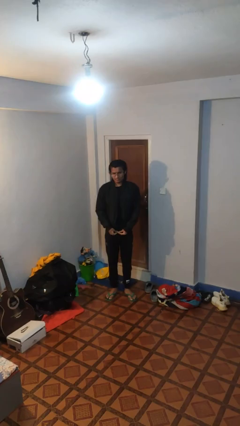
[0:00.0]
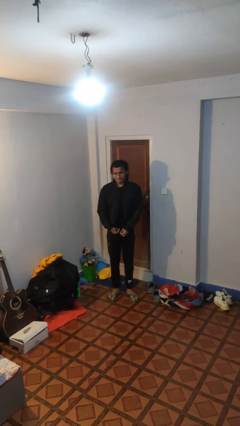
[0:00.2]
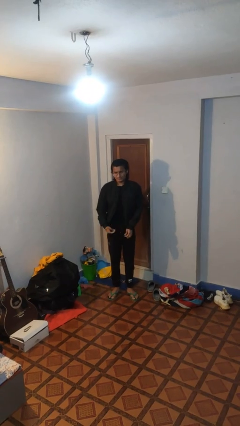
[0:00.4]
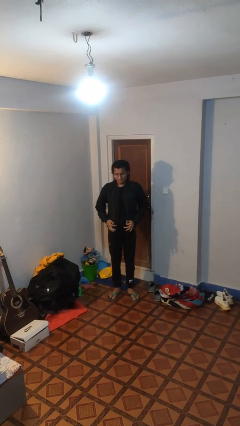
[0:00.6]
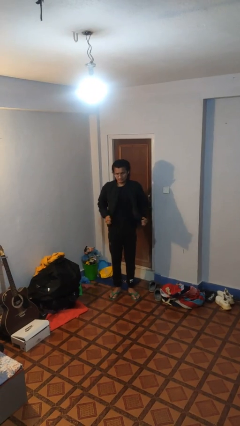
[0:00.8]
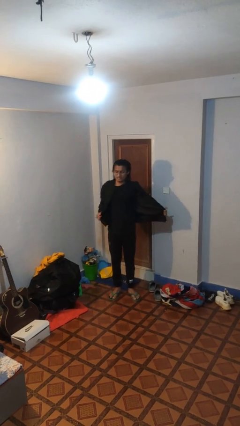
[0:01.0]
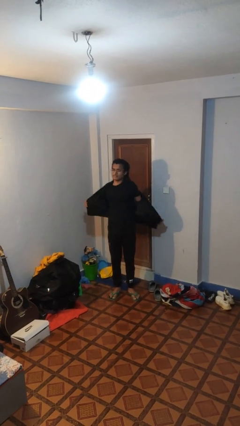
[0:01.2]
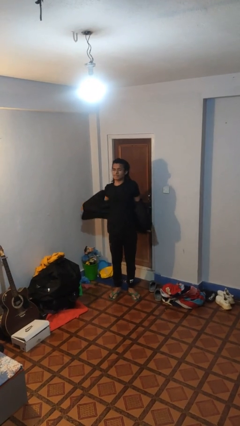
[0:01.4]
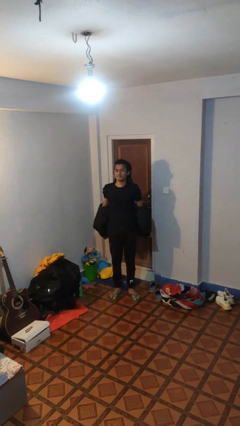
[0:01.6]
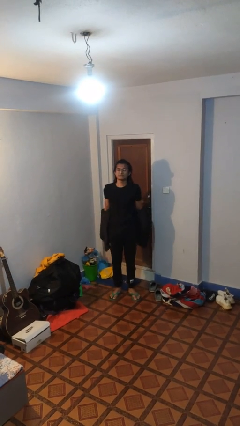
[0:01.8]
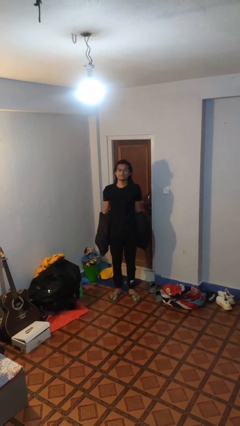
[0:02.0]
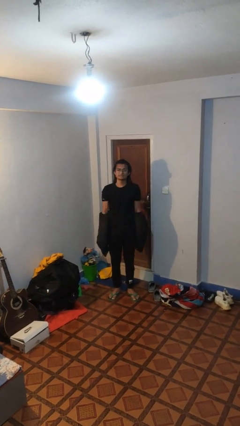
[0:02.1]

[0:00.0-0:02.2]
person takes off jacket

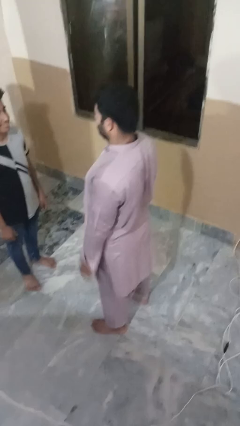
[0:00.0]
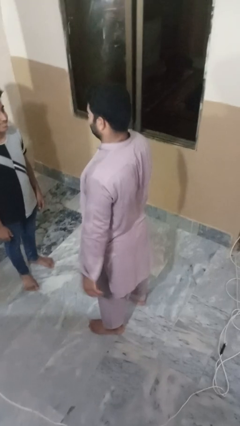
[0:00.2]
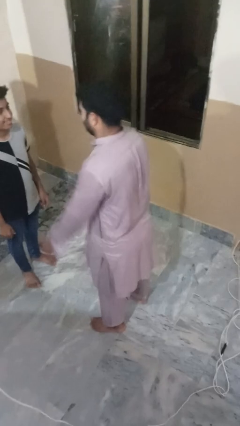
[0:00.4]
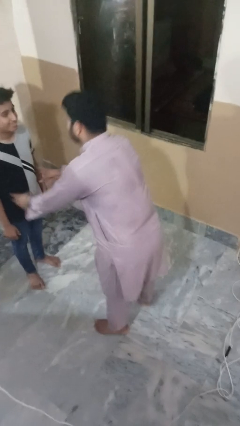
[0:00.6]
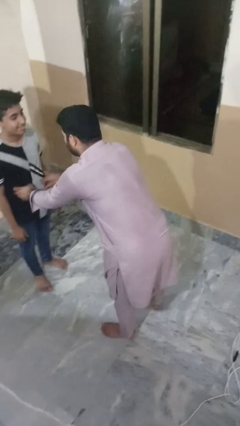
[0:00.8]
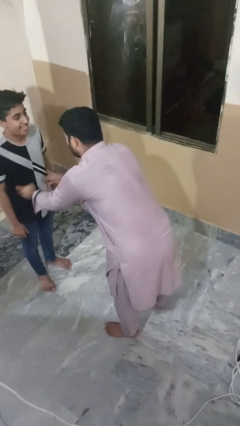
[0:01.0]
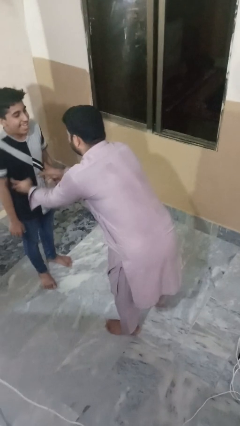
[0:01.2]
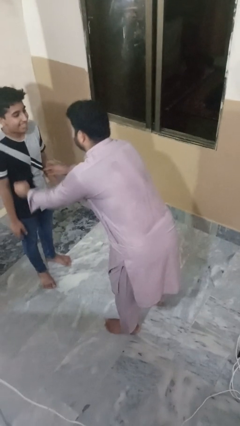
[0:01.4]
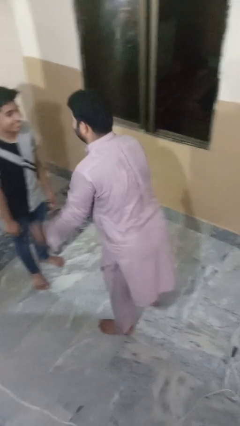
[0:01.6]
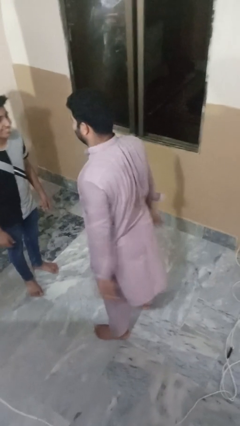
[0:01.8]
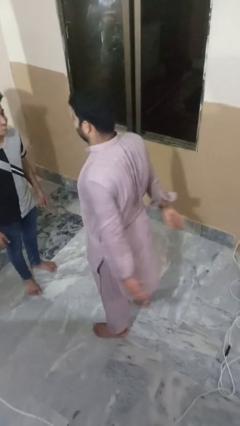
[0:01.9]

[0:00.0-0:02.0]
person tickles person

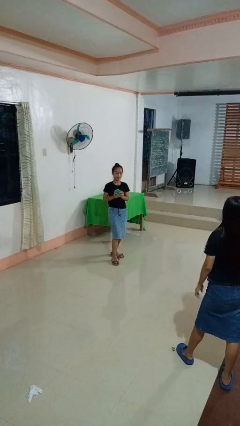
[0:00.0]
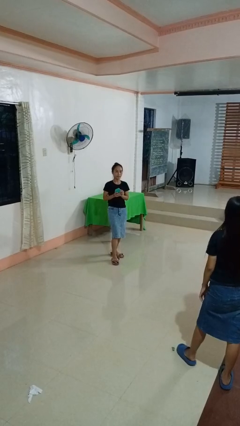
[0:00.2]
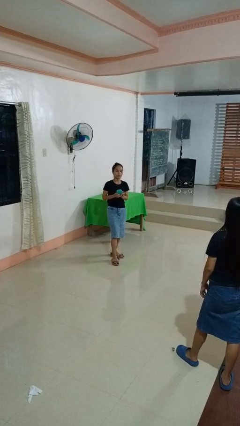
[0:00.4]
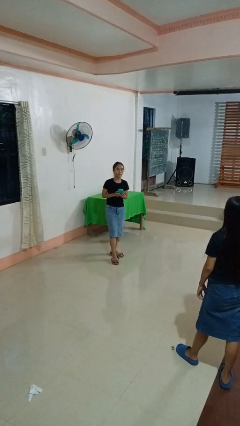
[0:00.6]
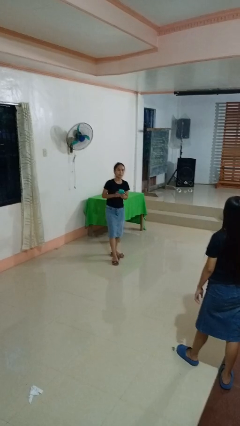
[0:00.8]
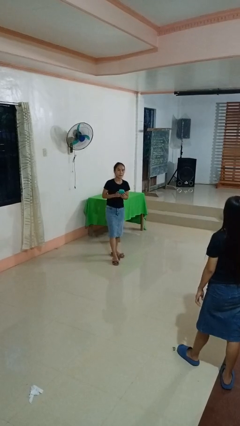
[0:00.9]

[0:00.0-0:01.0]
person catches object from person

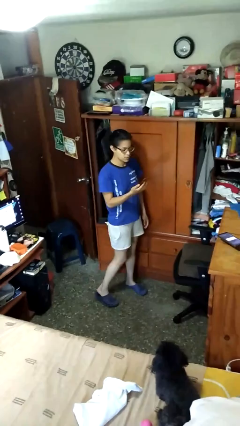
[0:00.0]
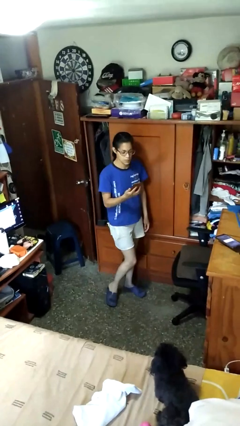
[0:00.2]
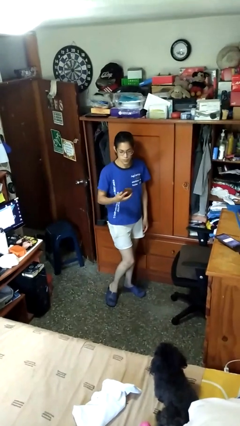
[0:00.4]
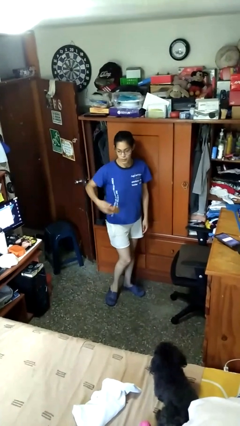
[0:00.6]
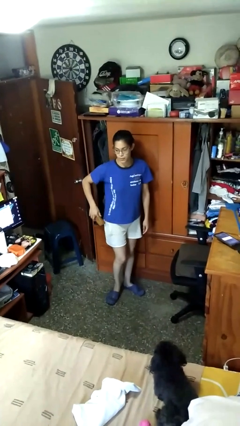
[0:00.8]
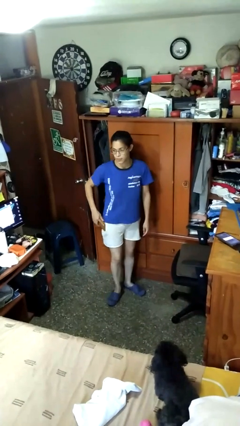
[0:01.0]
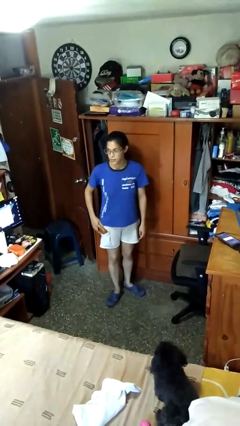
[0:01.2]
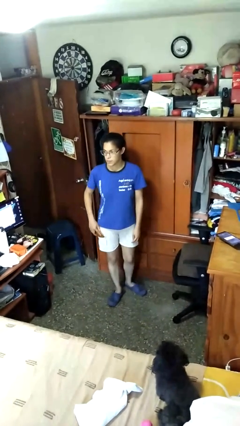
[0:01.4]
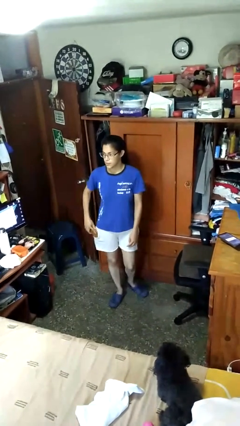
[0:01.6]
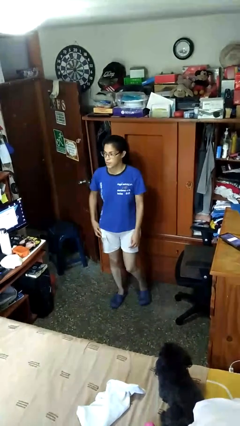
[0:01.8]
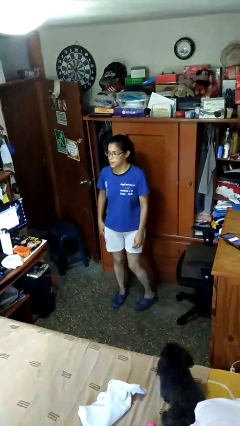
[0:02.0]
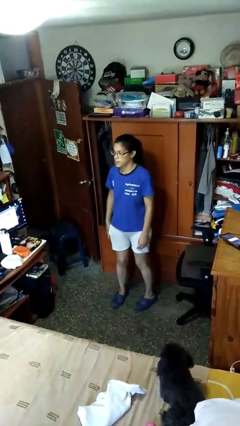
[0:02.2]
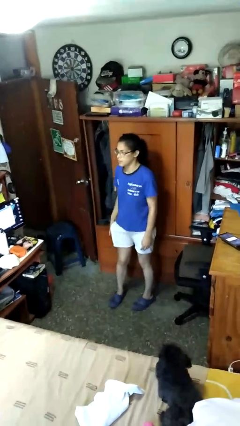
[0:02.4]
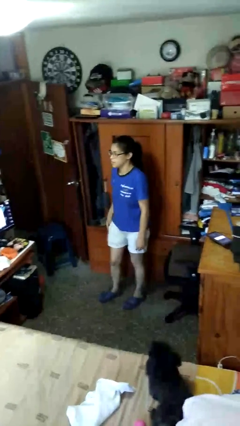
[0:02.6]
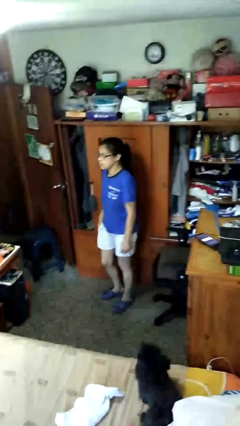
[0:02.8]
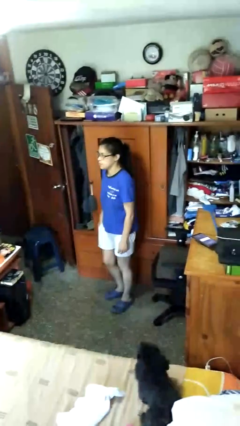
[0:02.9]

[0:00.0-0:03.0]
person puts phone into pocket

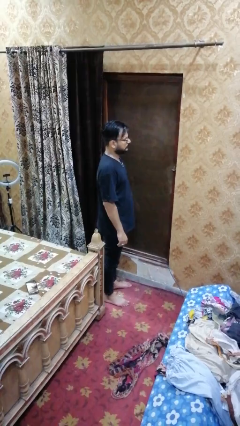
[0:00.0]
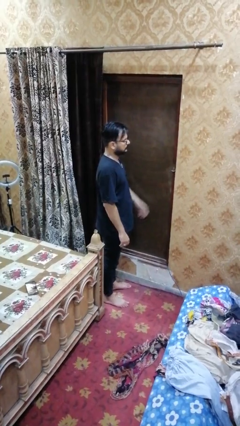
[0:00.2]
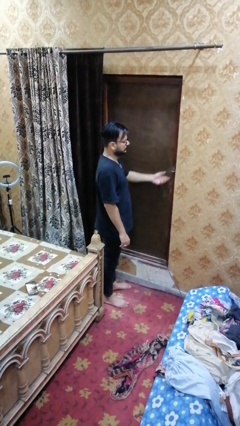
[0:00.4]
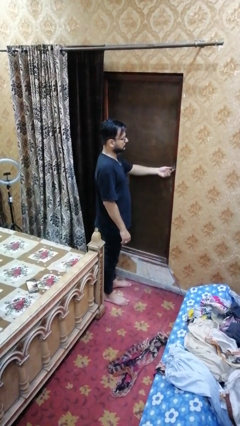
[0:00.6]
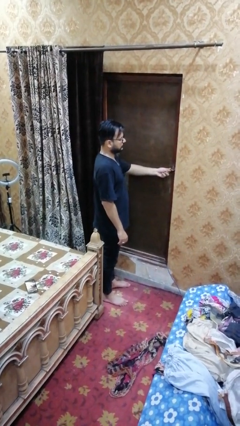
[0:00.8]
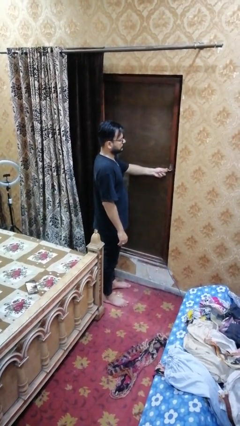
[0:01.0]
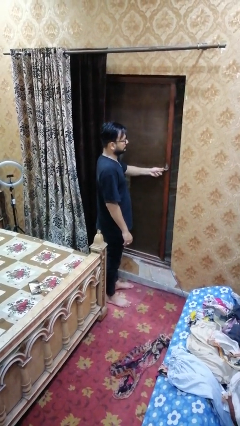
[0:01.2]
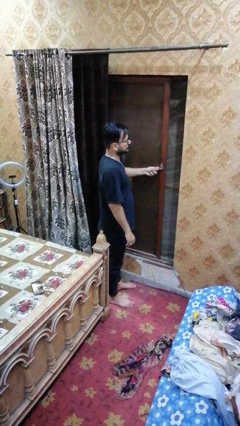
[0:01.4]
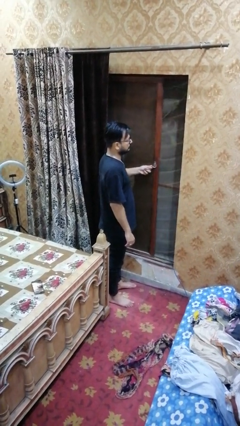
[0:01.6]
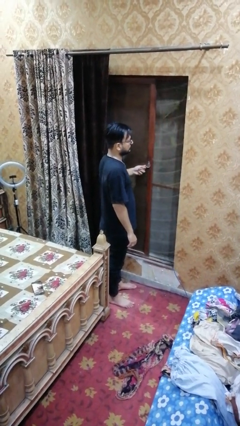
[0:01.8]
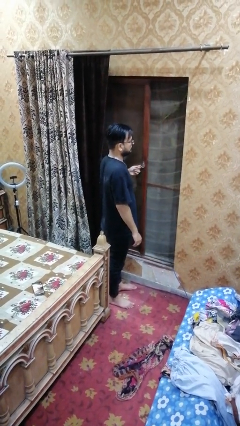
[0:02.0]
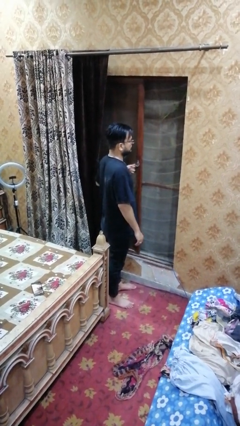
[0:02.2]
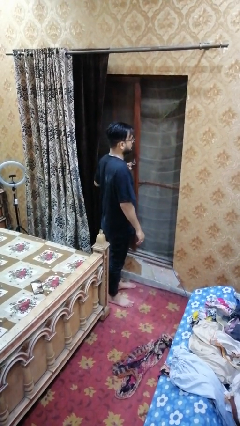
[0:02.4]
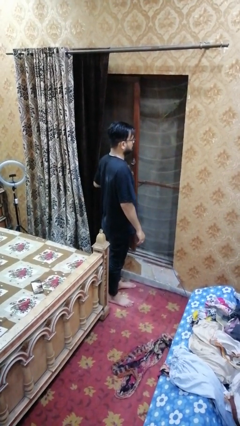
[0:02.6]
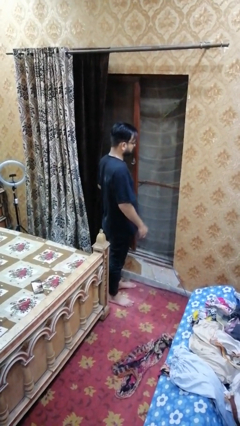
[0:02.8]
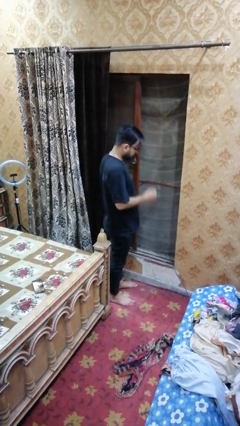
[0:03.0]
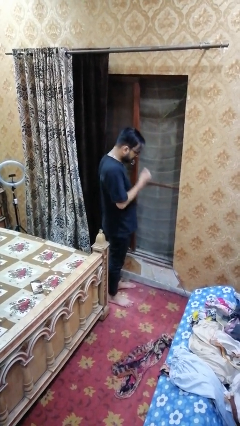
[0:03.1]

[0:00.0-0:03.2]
person opens sliding door

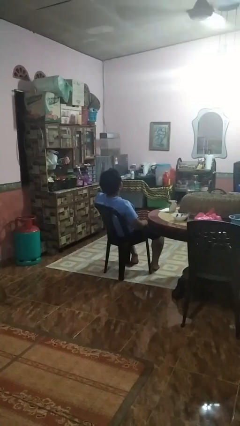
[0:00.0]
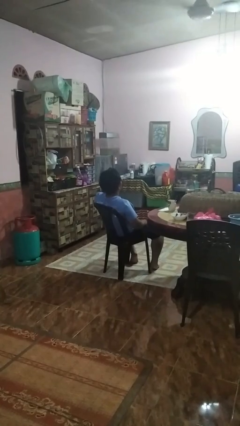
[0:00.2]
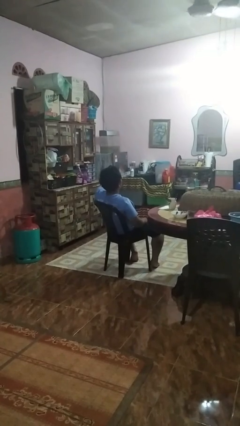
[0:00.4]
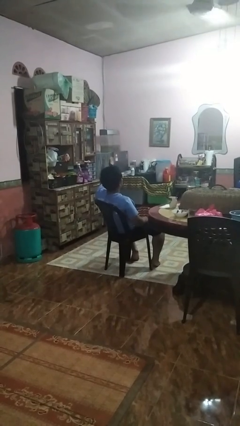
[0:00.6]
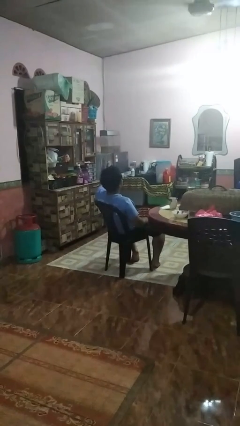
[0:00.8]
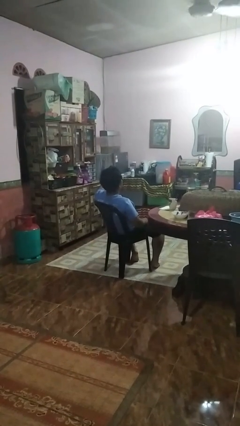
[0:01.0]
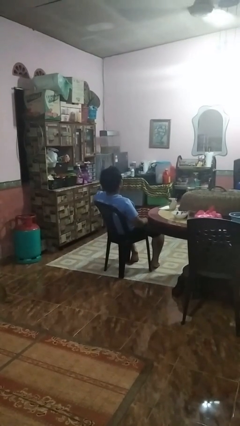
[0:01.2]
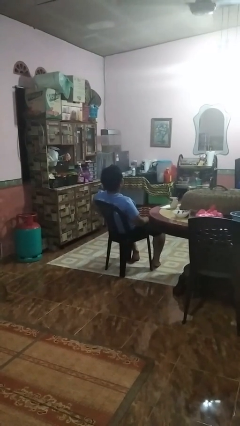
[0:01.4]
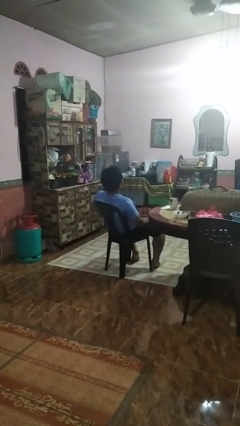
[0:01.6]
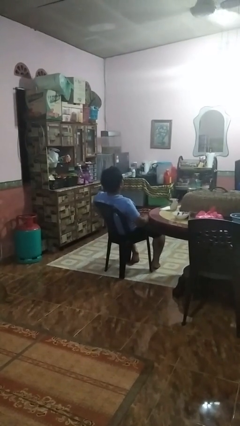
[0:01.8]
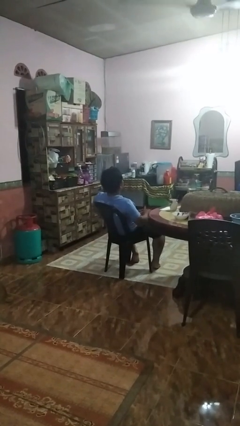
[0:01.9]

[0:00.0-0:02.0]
person gestures blow kiss

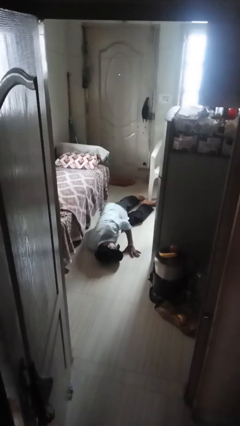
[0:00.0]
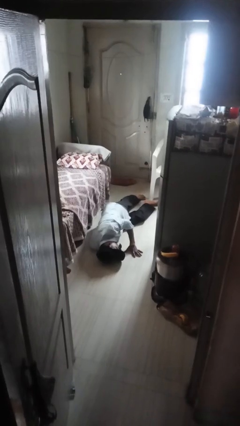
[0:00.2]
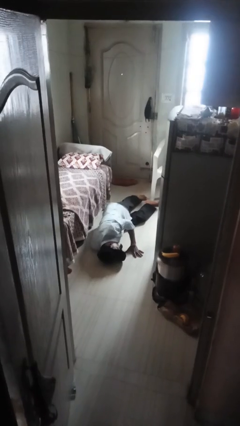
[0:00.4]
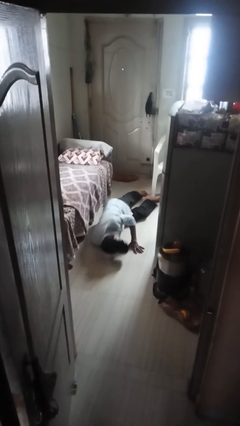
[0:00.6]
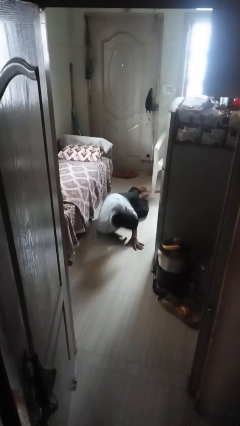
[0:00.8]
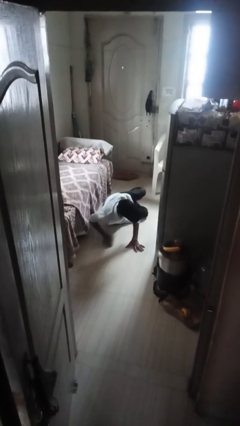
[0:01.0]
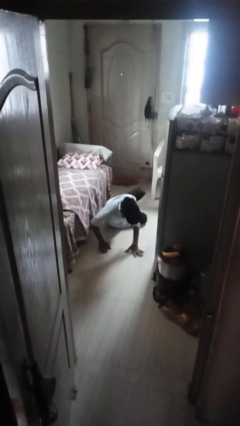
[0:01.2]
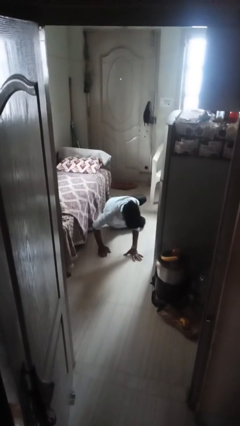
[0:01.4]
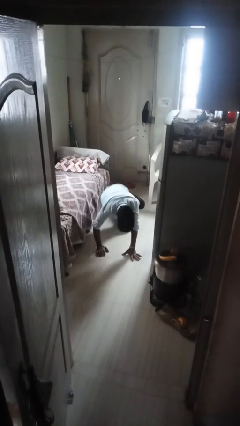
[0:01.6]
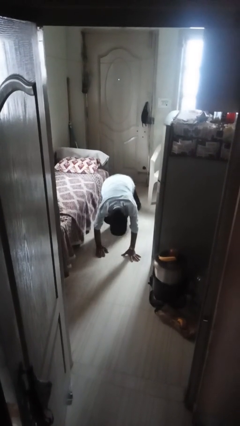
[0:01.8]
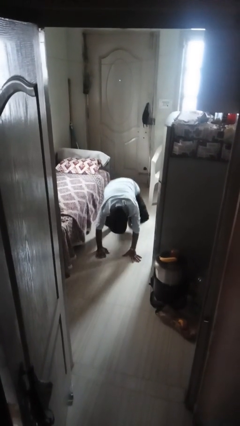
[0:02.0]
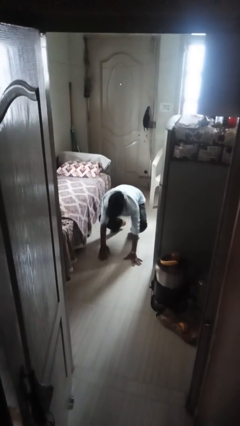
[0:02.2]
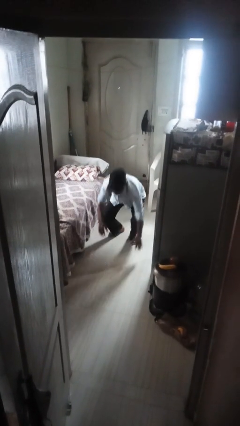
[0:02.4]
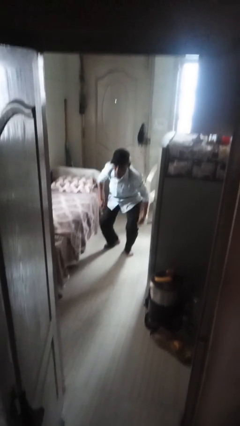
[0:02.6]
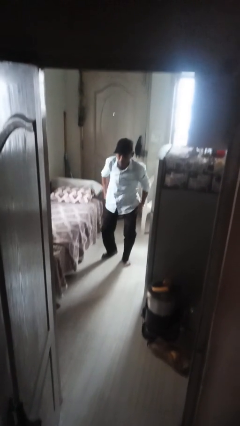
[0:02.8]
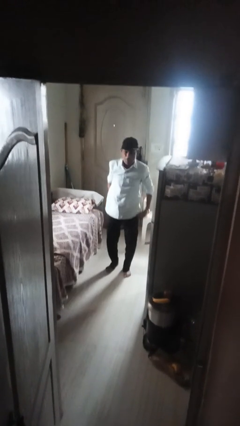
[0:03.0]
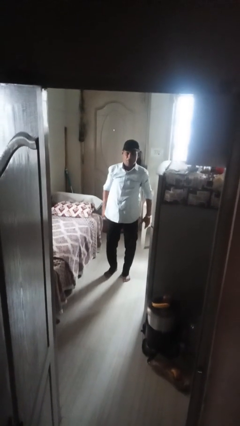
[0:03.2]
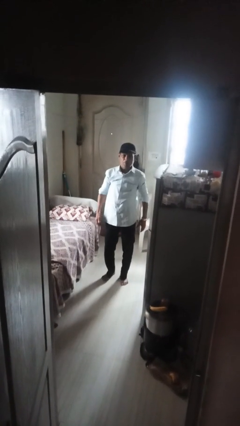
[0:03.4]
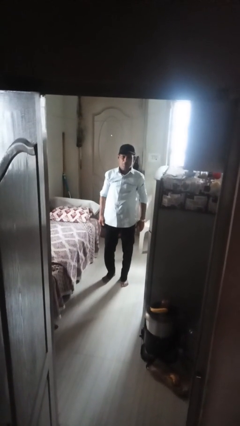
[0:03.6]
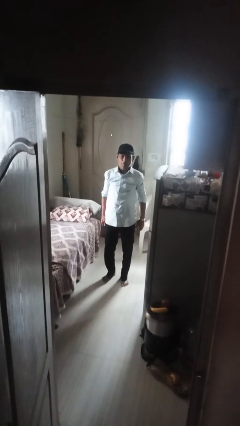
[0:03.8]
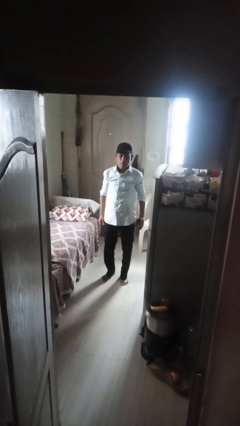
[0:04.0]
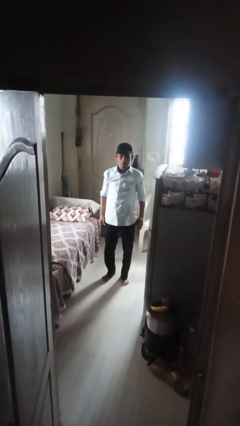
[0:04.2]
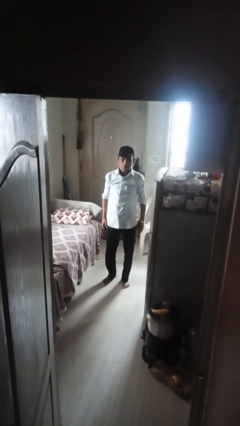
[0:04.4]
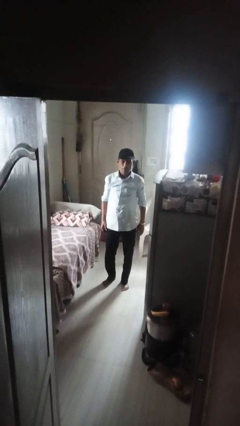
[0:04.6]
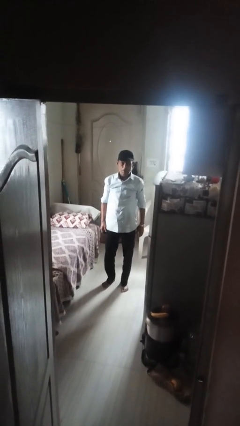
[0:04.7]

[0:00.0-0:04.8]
person stands up from floor
